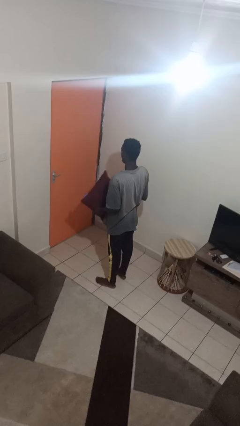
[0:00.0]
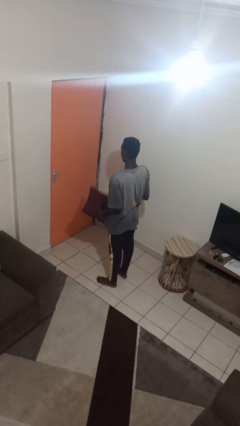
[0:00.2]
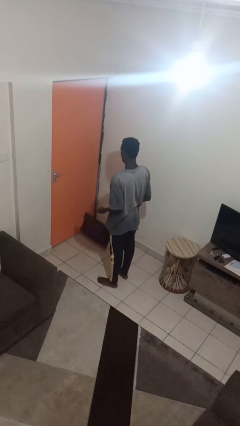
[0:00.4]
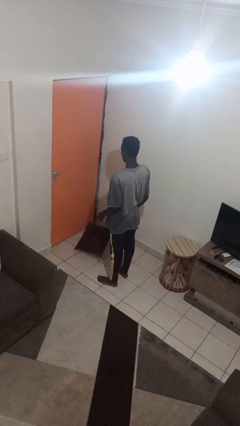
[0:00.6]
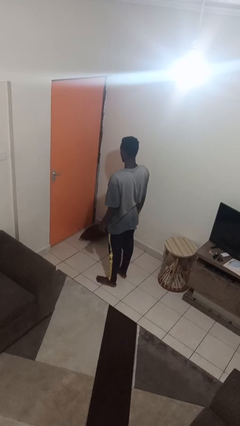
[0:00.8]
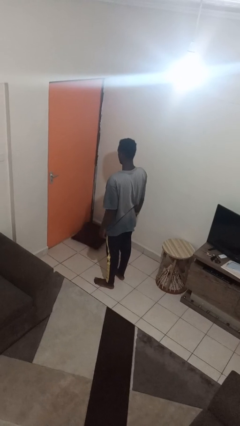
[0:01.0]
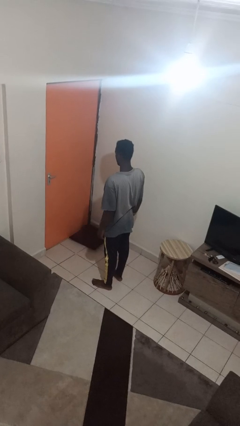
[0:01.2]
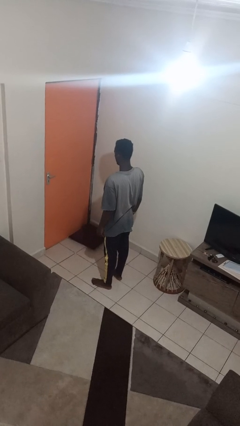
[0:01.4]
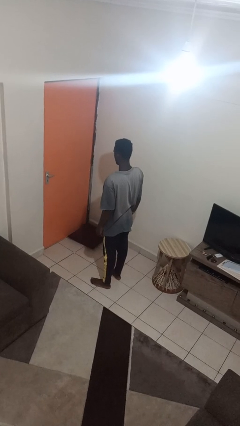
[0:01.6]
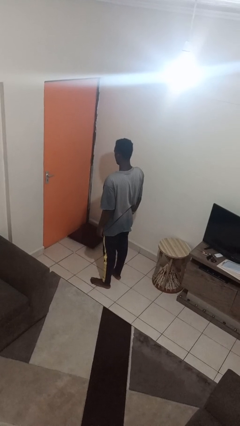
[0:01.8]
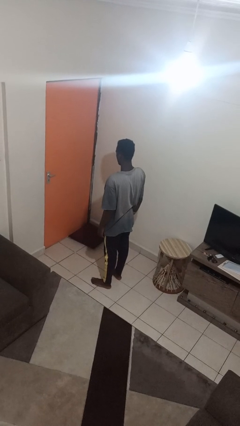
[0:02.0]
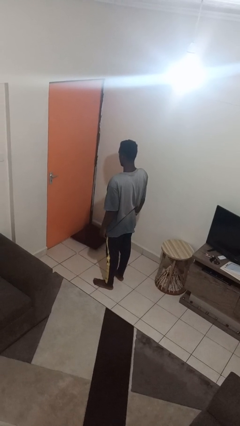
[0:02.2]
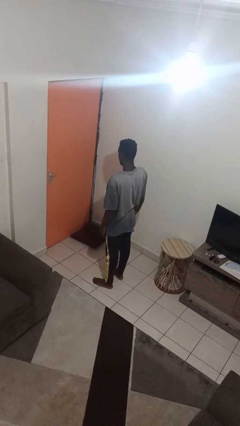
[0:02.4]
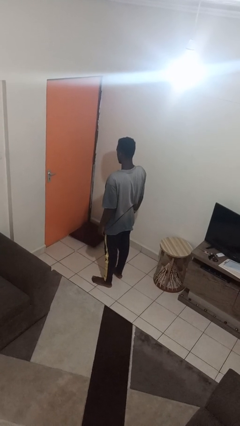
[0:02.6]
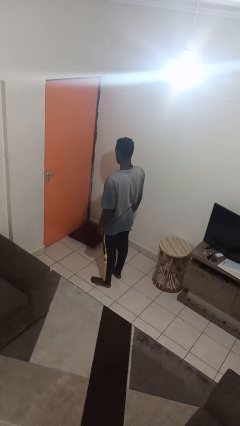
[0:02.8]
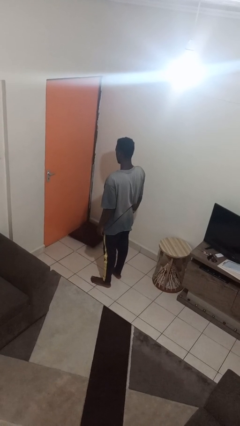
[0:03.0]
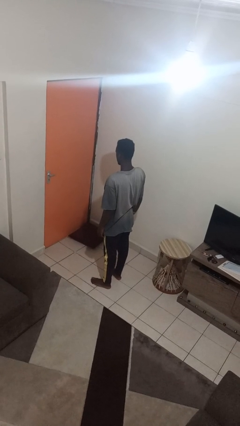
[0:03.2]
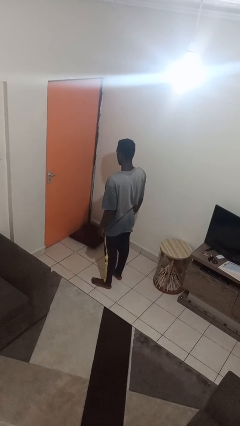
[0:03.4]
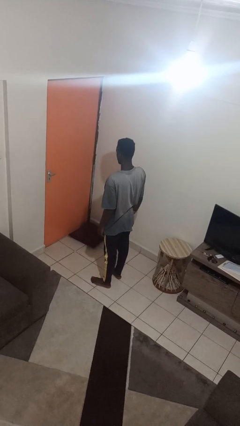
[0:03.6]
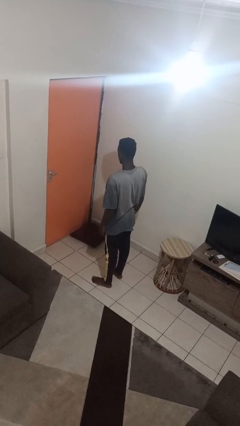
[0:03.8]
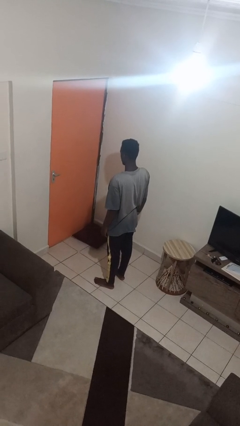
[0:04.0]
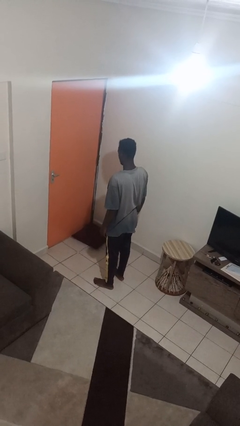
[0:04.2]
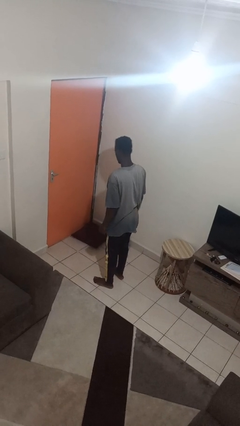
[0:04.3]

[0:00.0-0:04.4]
person drops object

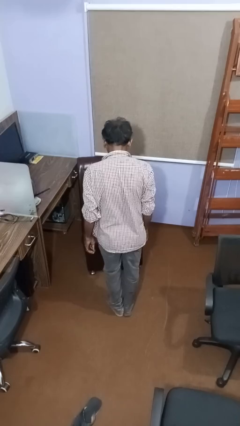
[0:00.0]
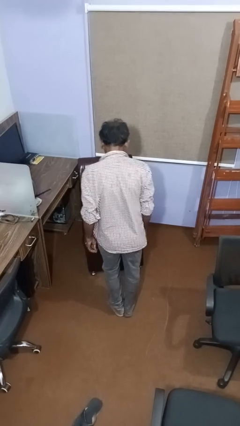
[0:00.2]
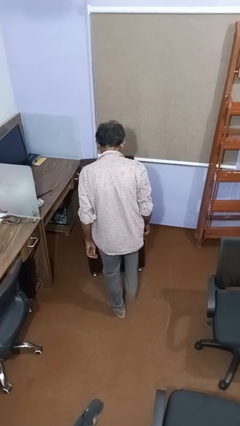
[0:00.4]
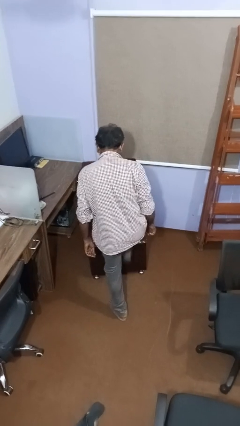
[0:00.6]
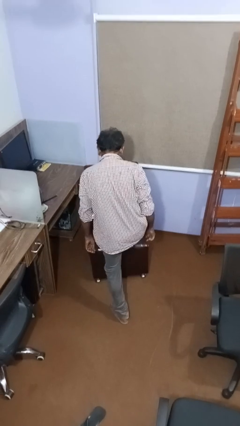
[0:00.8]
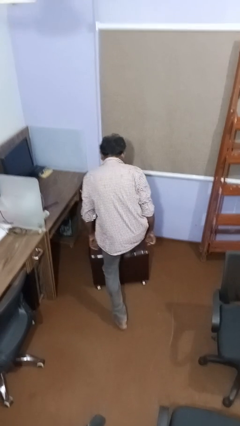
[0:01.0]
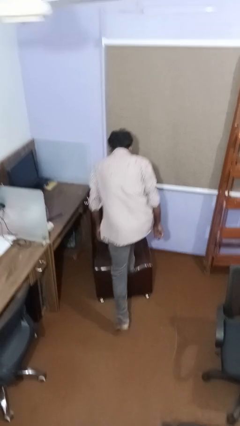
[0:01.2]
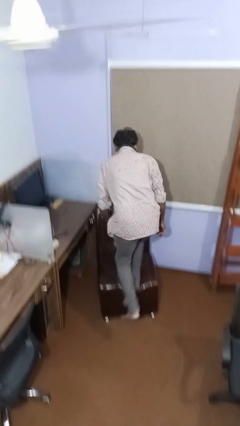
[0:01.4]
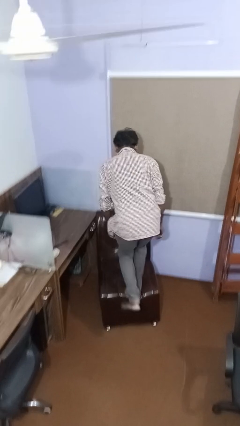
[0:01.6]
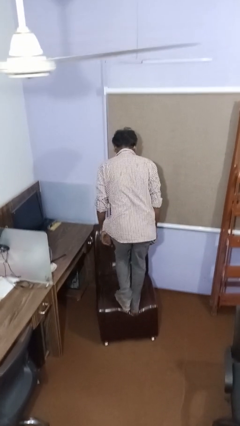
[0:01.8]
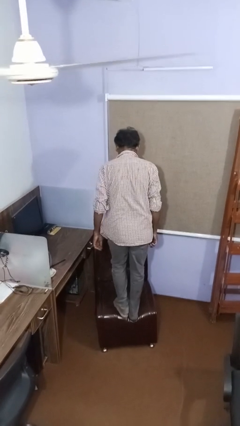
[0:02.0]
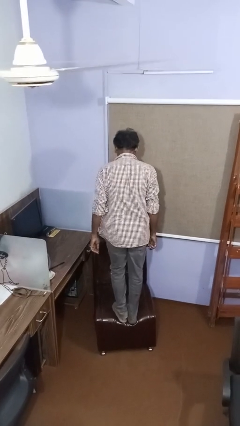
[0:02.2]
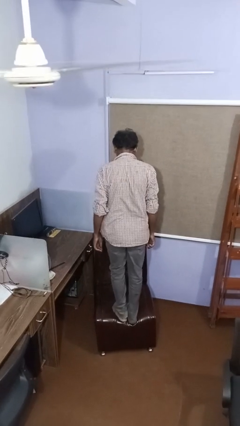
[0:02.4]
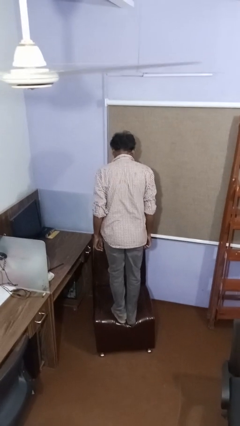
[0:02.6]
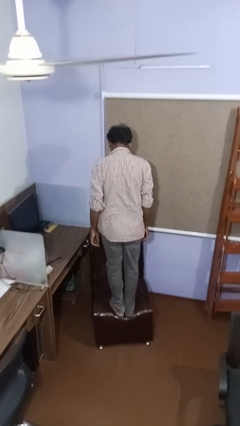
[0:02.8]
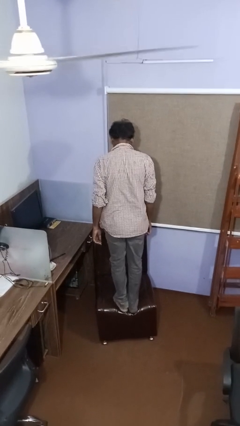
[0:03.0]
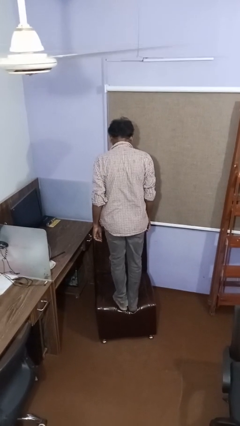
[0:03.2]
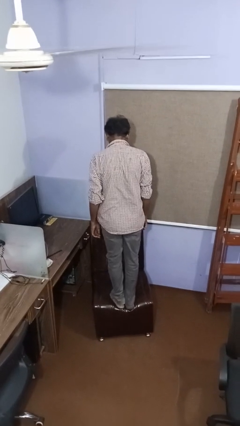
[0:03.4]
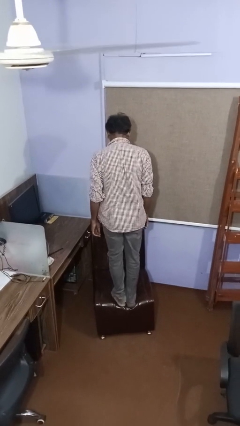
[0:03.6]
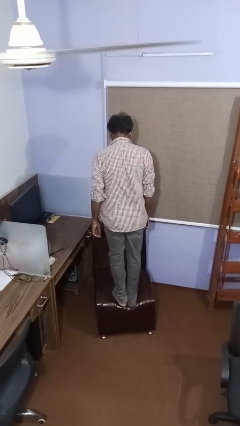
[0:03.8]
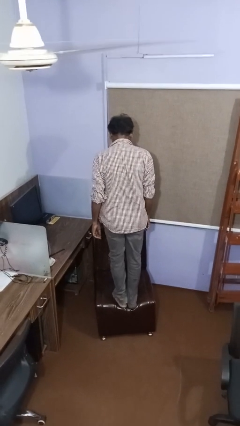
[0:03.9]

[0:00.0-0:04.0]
person climbs on couch

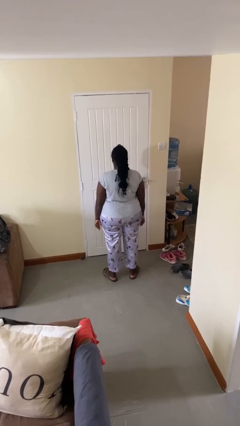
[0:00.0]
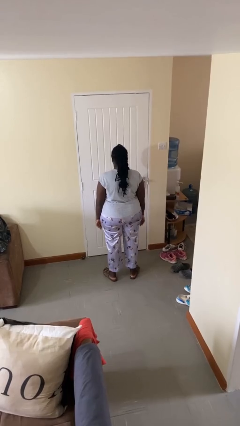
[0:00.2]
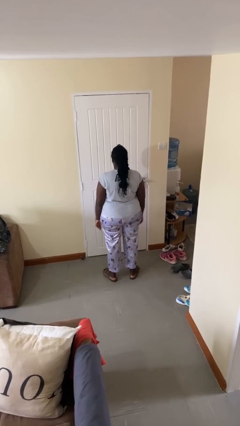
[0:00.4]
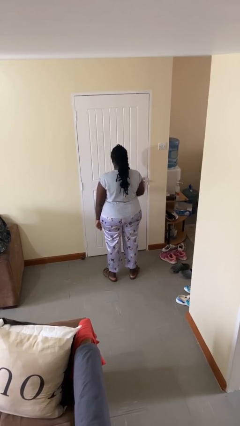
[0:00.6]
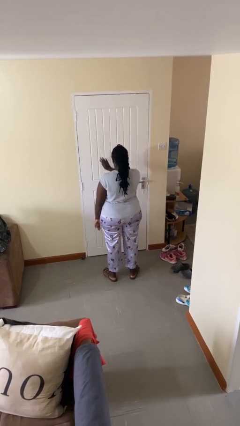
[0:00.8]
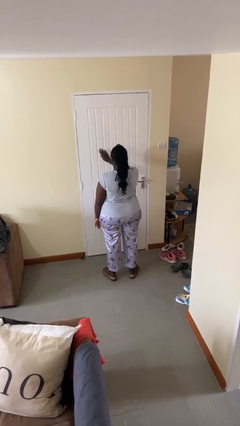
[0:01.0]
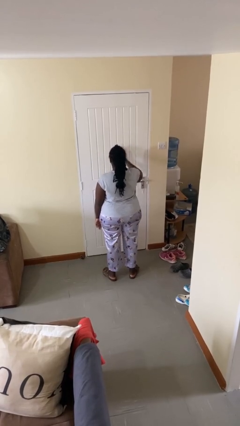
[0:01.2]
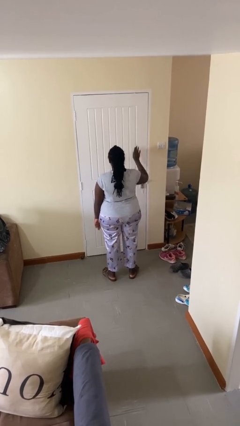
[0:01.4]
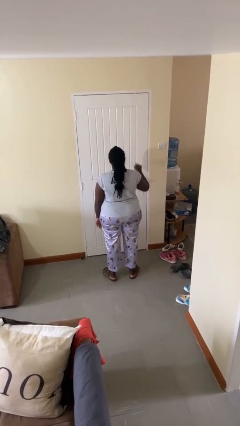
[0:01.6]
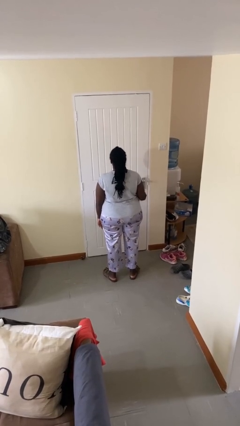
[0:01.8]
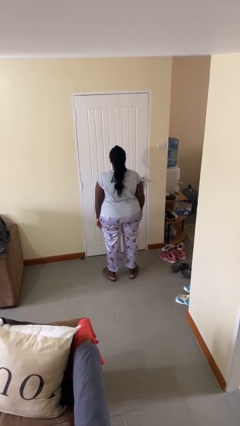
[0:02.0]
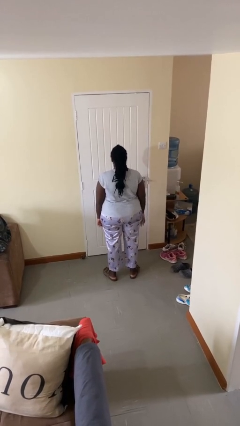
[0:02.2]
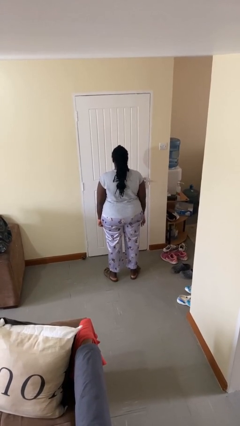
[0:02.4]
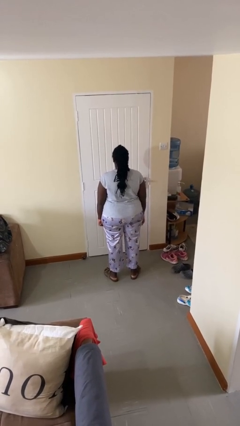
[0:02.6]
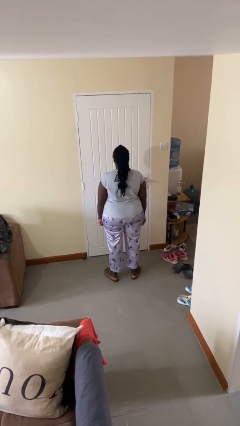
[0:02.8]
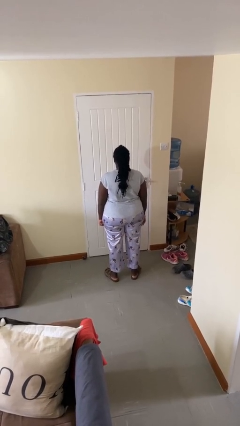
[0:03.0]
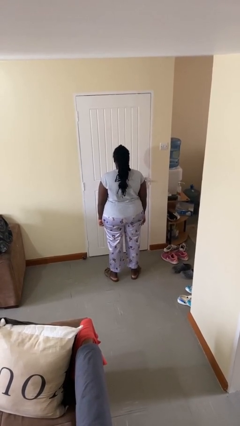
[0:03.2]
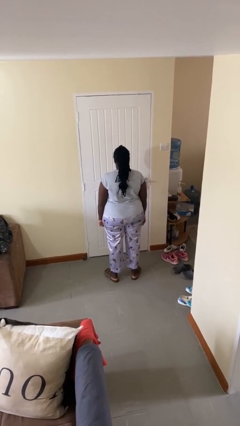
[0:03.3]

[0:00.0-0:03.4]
person gestures swipe right

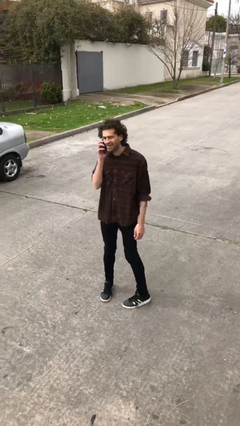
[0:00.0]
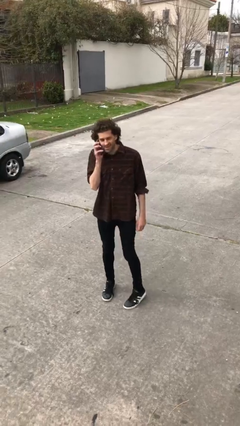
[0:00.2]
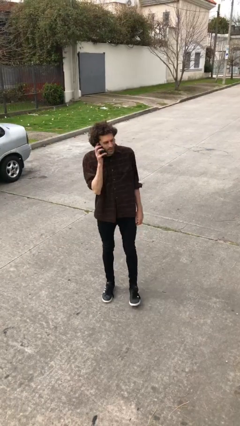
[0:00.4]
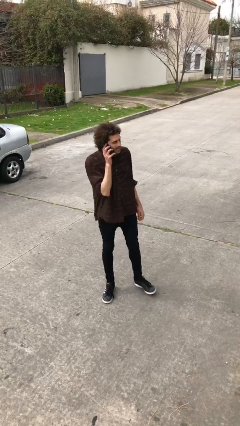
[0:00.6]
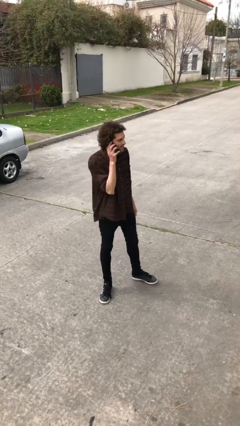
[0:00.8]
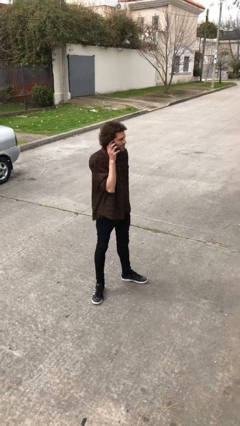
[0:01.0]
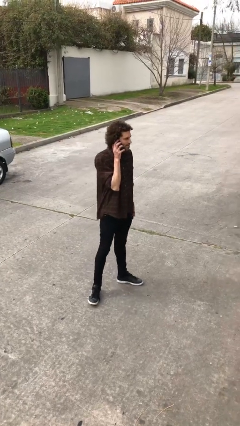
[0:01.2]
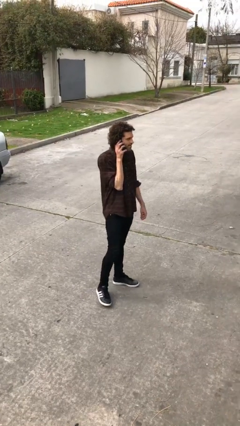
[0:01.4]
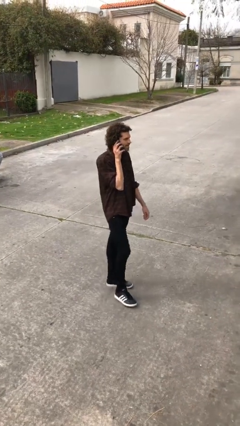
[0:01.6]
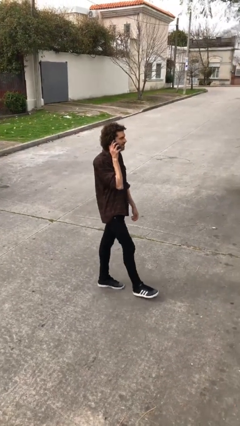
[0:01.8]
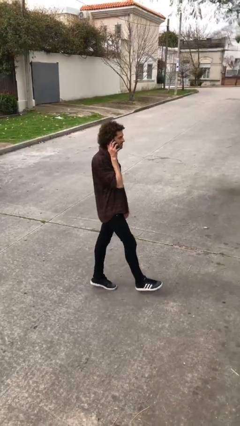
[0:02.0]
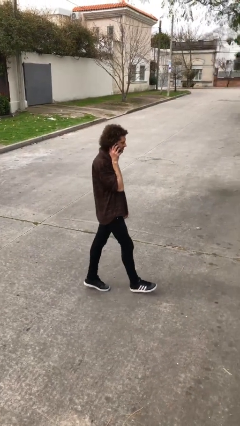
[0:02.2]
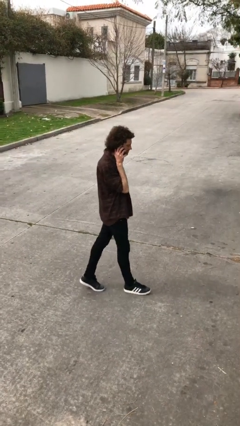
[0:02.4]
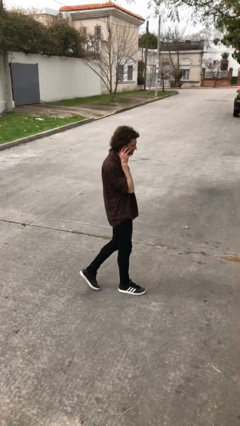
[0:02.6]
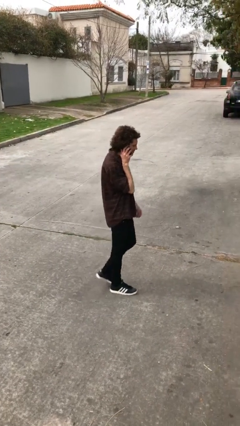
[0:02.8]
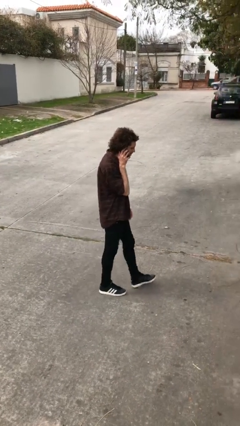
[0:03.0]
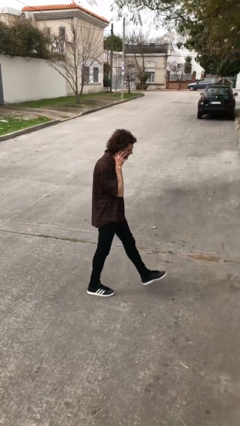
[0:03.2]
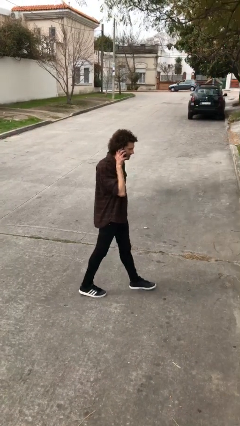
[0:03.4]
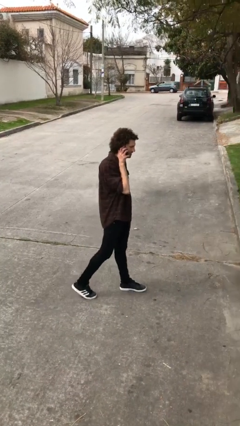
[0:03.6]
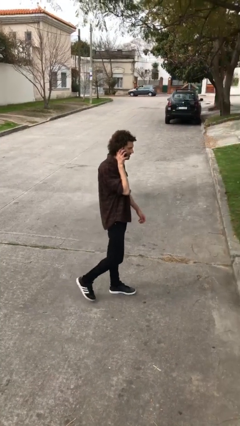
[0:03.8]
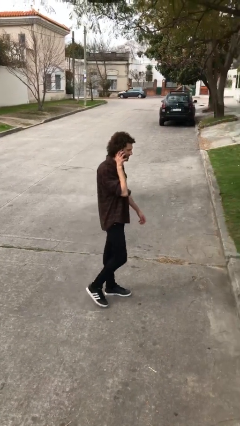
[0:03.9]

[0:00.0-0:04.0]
person talks on phone

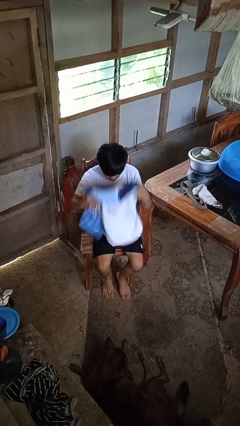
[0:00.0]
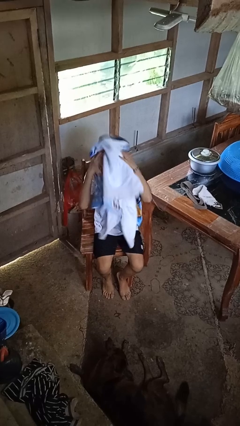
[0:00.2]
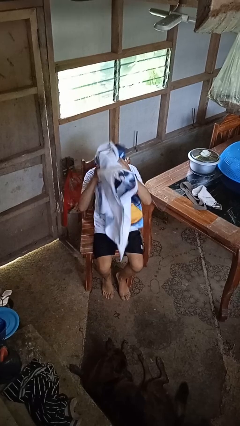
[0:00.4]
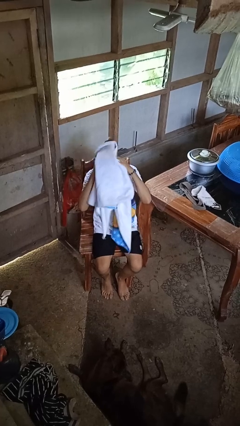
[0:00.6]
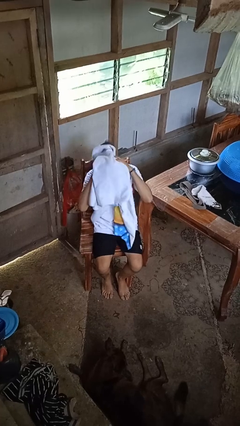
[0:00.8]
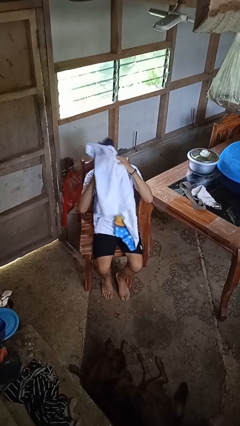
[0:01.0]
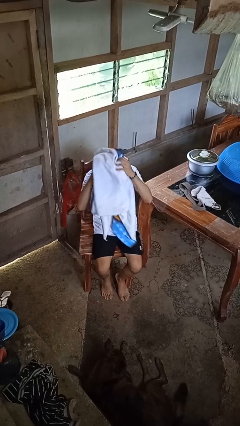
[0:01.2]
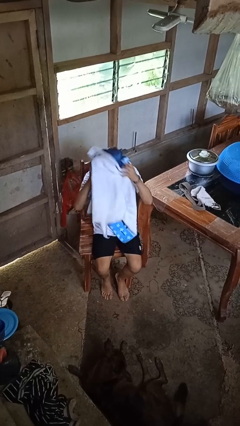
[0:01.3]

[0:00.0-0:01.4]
person dries hair with towel

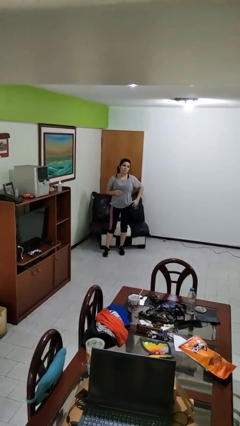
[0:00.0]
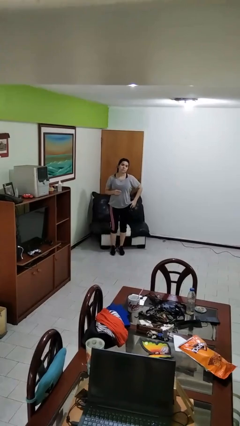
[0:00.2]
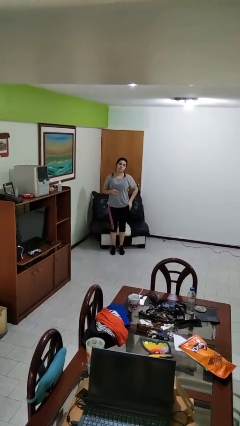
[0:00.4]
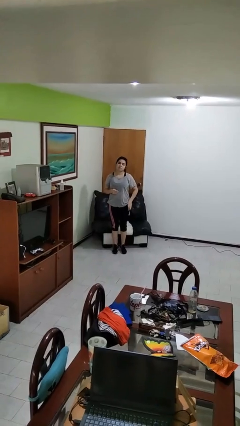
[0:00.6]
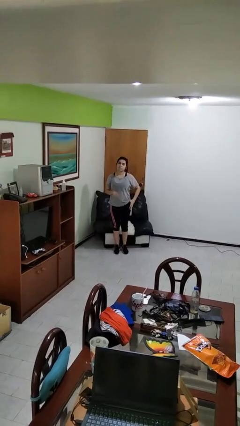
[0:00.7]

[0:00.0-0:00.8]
person puts phone into pocket
